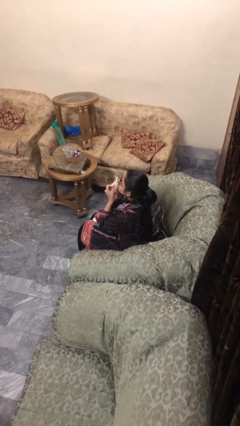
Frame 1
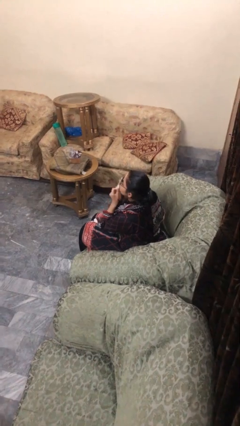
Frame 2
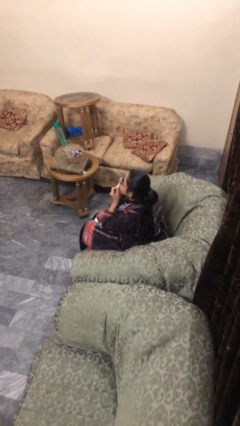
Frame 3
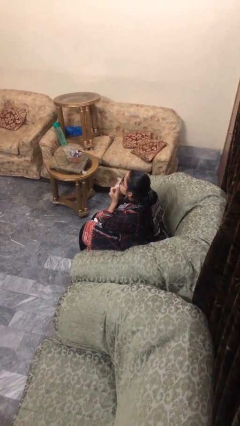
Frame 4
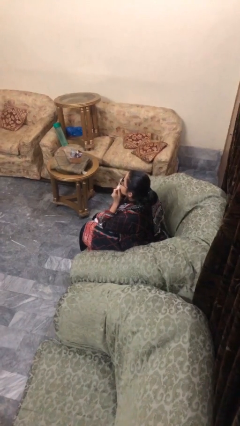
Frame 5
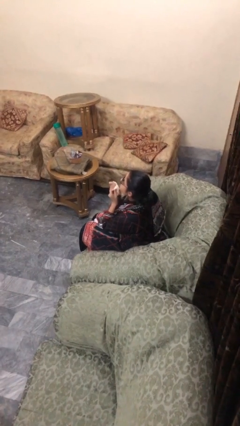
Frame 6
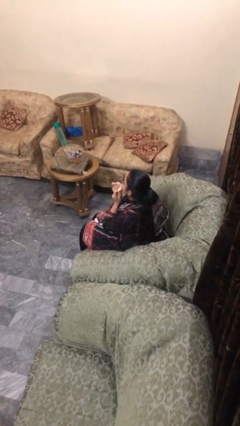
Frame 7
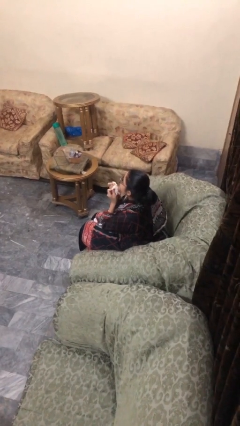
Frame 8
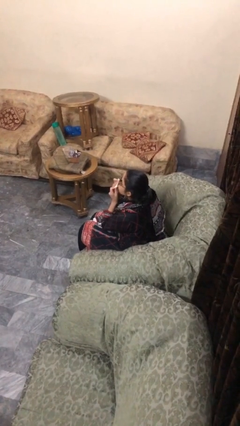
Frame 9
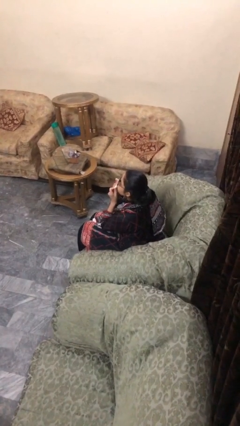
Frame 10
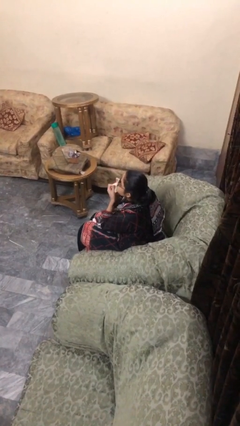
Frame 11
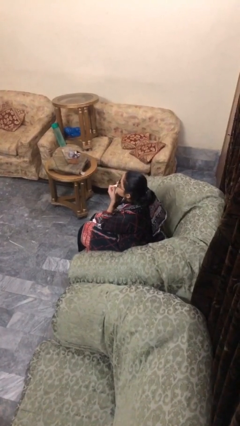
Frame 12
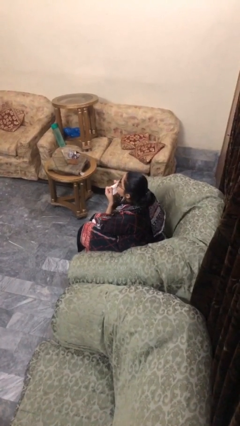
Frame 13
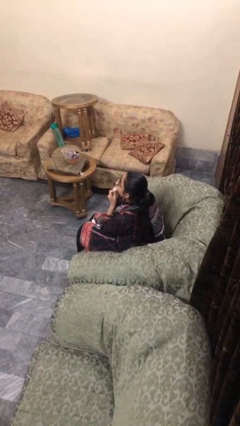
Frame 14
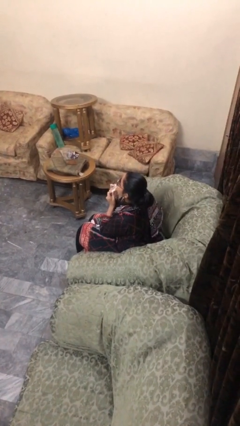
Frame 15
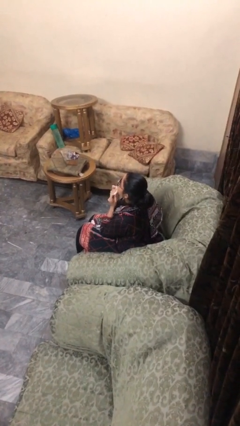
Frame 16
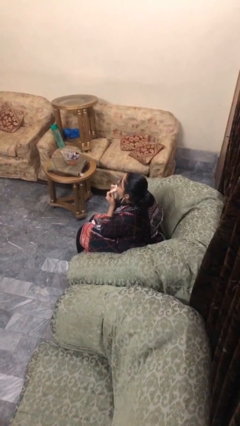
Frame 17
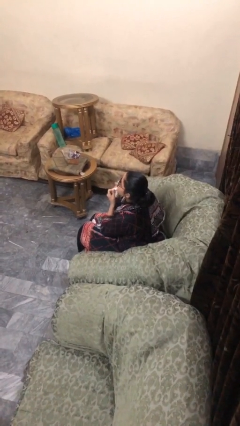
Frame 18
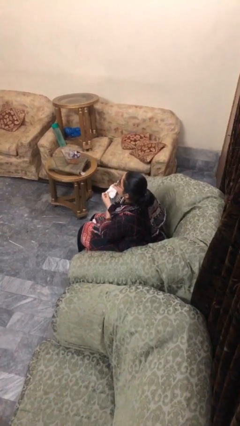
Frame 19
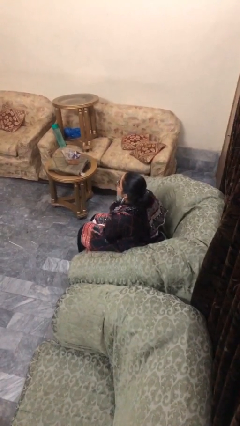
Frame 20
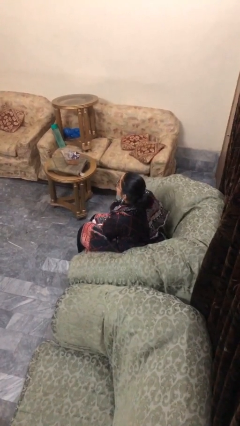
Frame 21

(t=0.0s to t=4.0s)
person wipes mouth with napkin

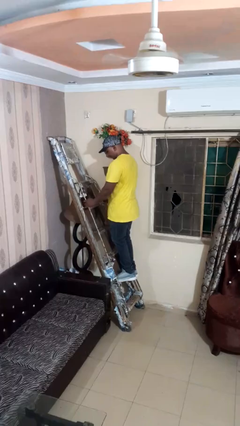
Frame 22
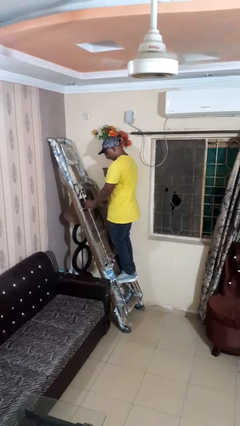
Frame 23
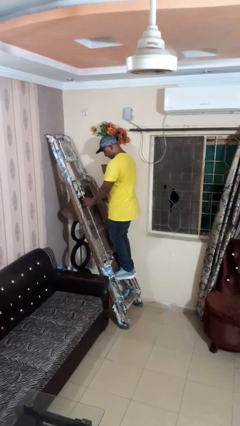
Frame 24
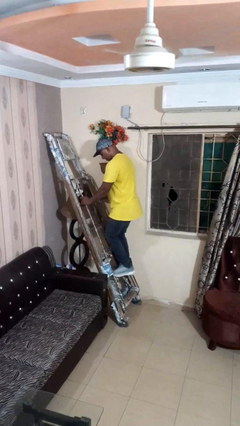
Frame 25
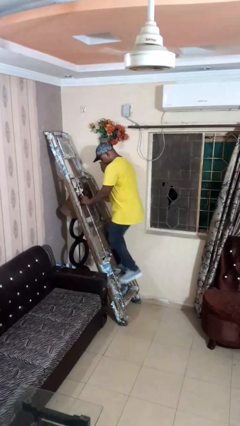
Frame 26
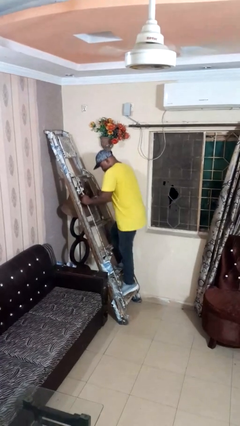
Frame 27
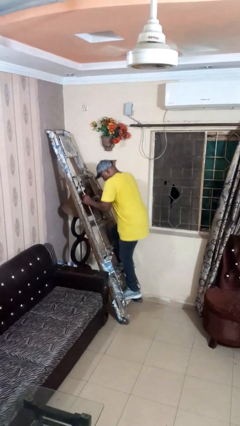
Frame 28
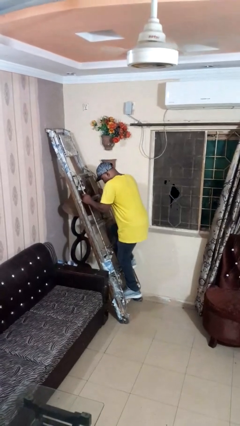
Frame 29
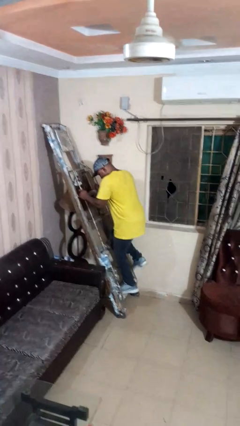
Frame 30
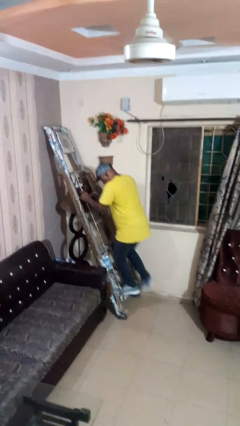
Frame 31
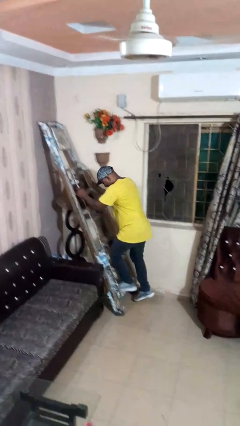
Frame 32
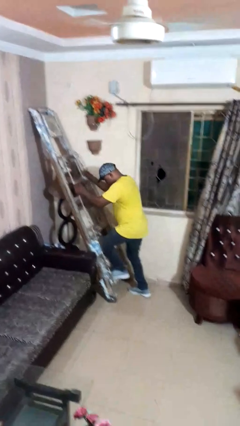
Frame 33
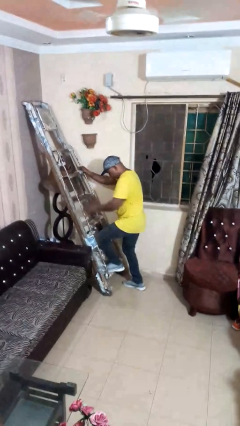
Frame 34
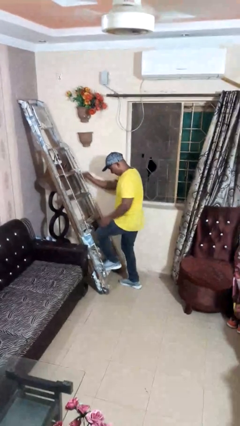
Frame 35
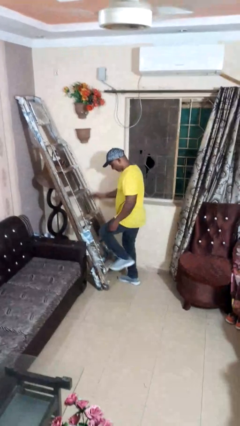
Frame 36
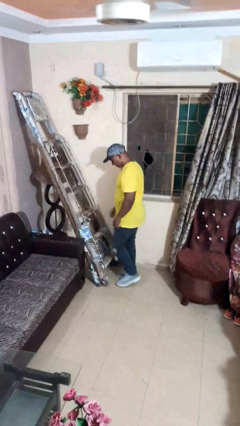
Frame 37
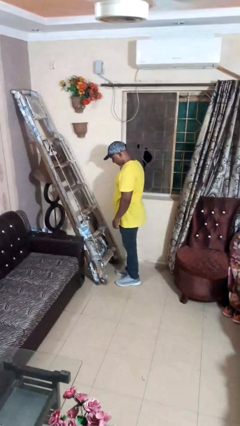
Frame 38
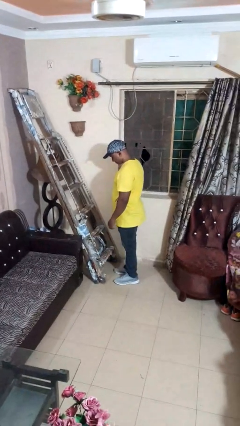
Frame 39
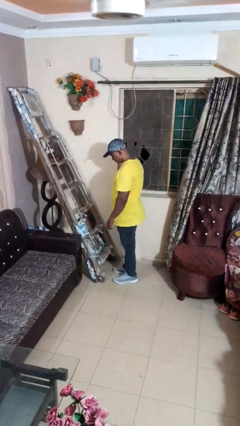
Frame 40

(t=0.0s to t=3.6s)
person climbs down ladder

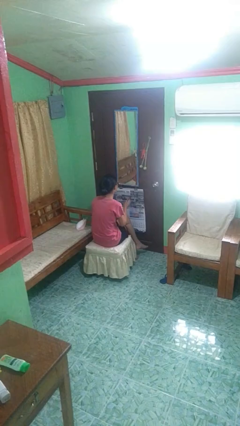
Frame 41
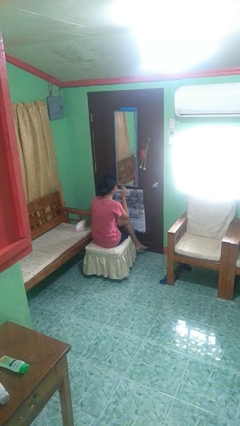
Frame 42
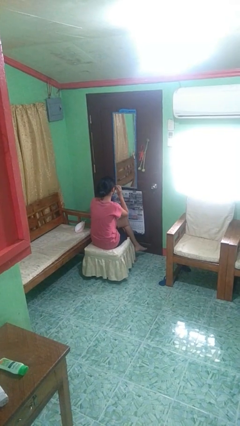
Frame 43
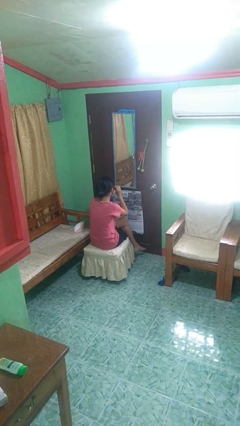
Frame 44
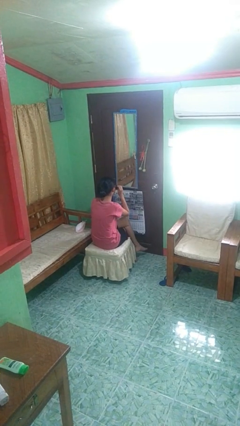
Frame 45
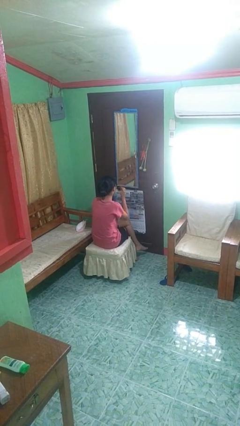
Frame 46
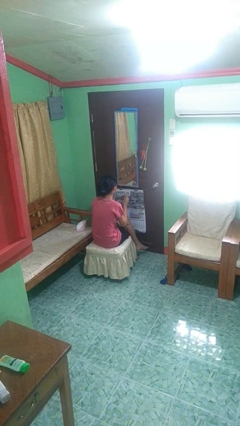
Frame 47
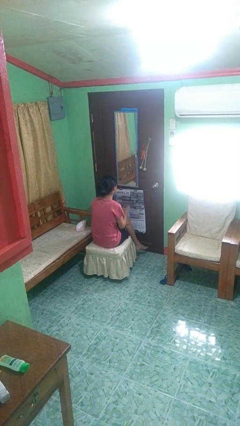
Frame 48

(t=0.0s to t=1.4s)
person takes off sunglasses

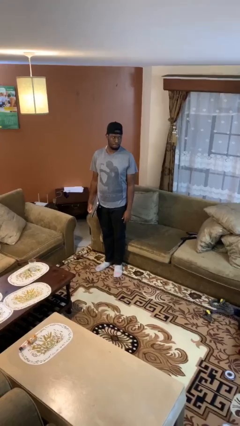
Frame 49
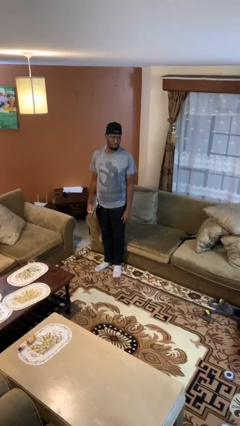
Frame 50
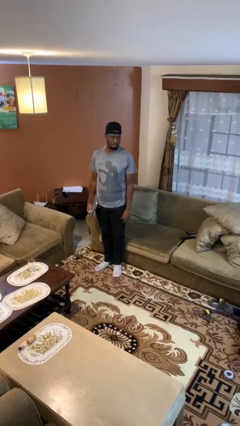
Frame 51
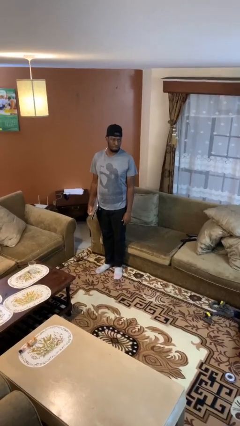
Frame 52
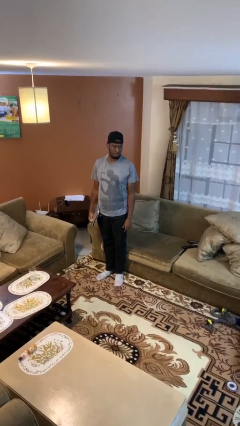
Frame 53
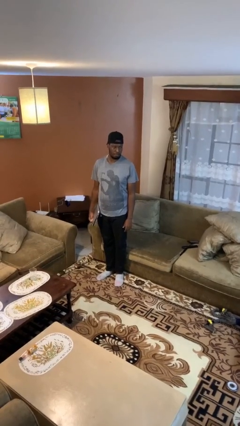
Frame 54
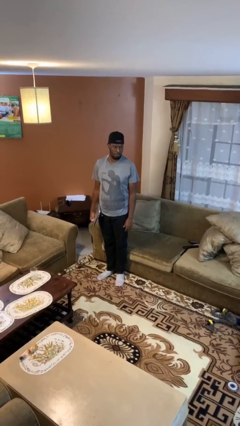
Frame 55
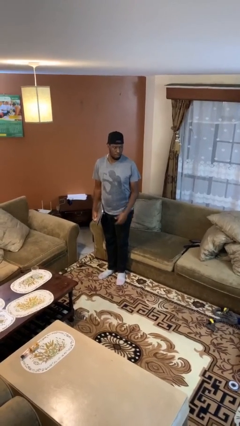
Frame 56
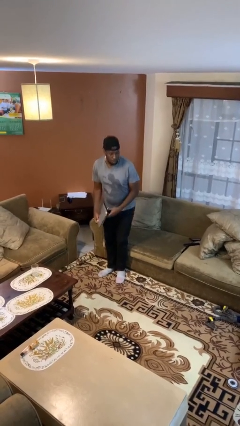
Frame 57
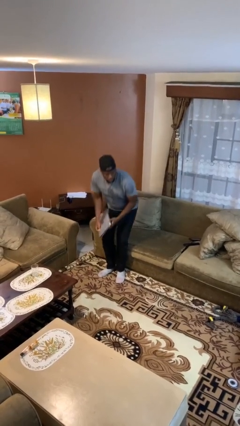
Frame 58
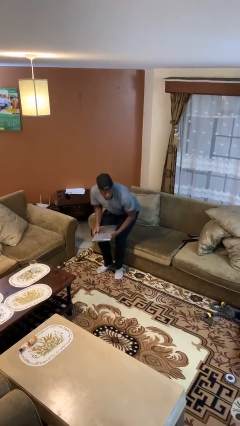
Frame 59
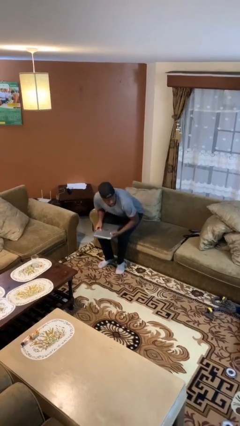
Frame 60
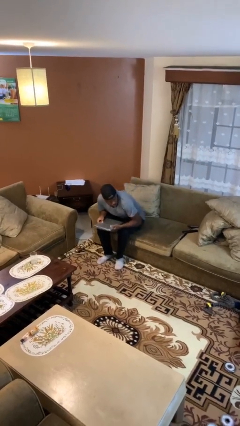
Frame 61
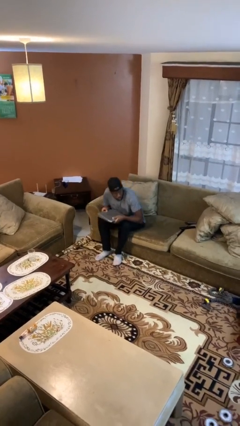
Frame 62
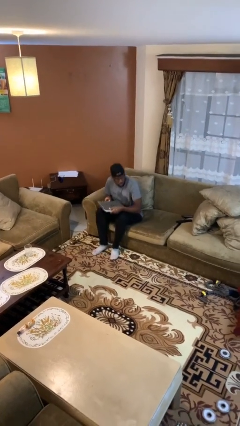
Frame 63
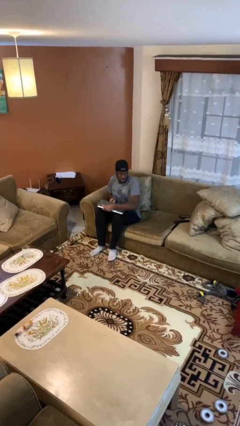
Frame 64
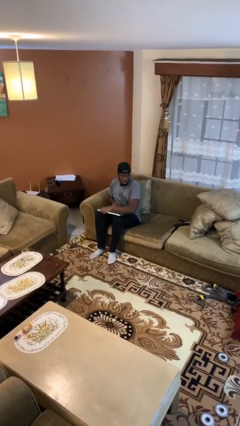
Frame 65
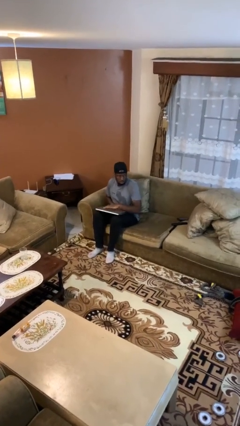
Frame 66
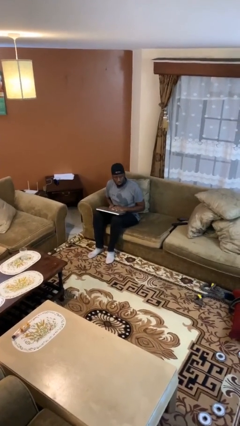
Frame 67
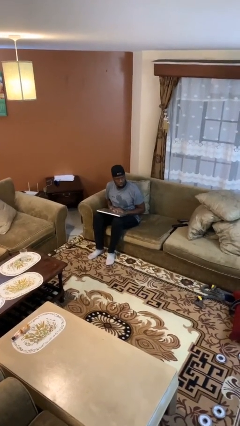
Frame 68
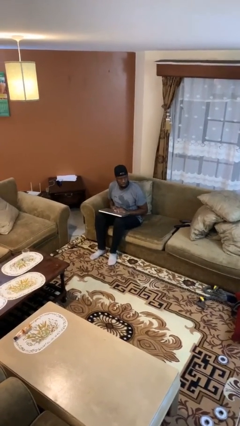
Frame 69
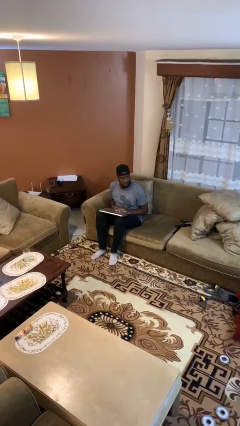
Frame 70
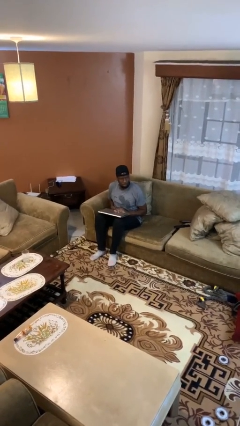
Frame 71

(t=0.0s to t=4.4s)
person sits down

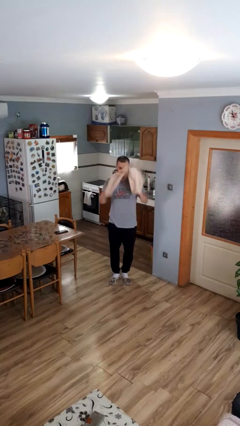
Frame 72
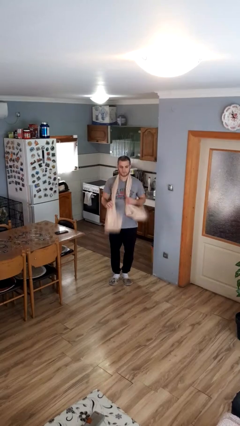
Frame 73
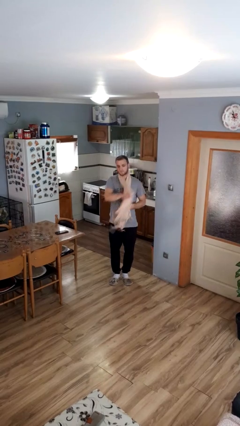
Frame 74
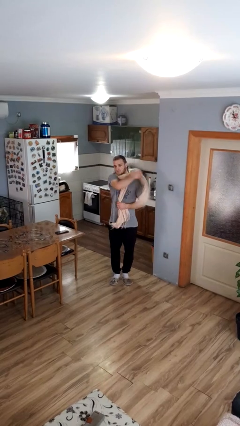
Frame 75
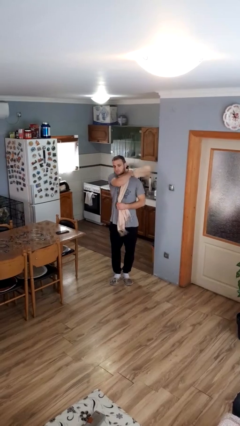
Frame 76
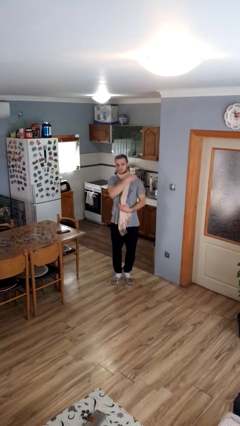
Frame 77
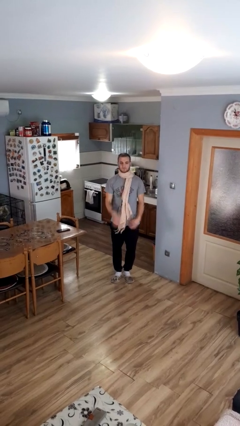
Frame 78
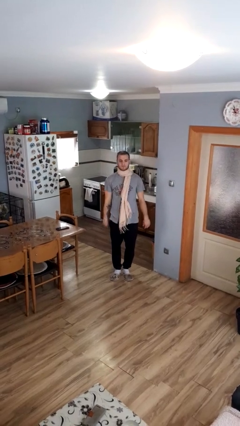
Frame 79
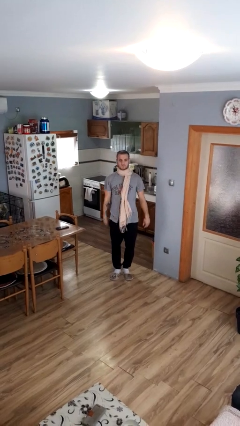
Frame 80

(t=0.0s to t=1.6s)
person puts on scarf

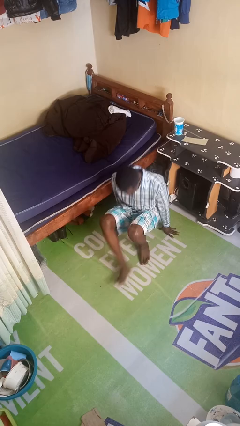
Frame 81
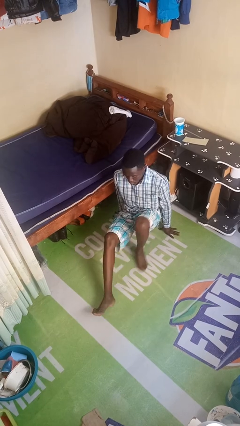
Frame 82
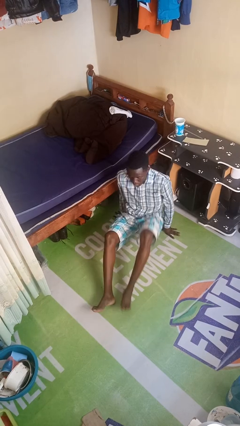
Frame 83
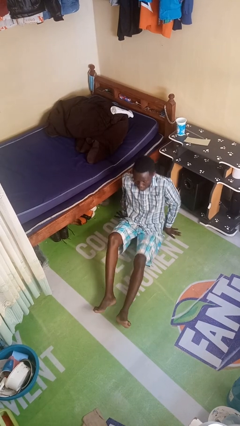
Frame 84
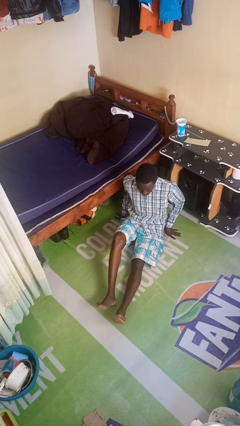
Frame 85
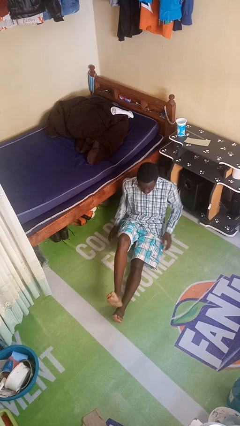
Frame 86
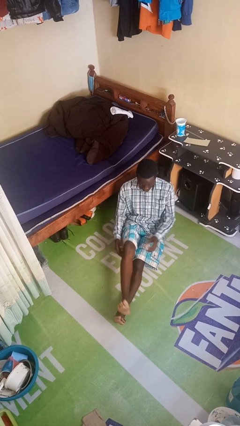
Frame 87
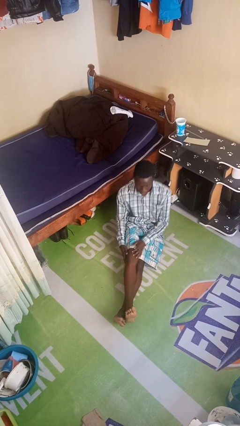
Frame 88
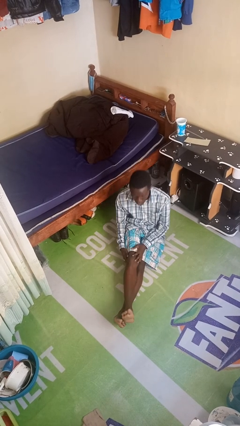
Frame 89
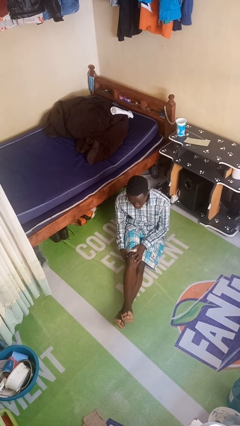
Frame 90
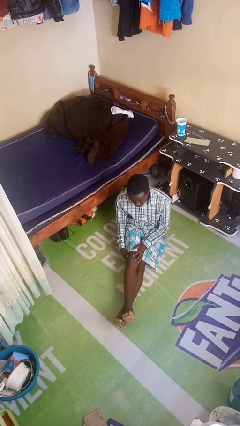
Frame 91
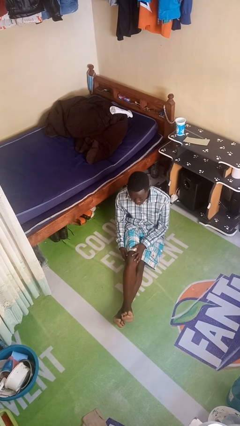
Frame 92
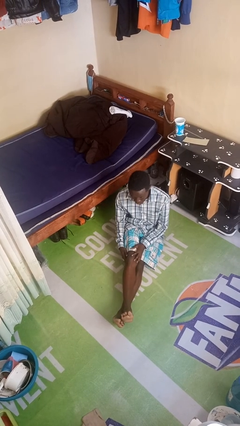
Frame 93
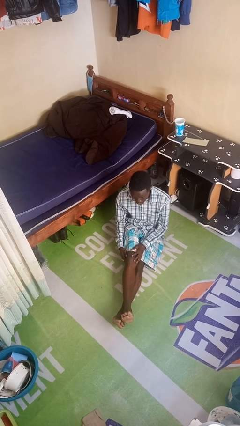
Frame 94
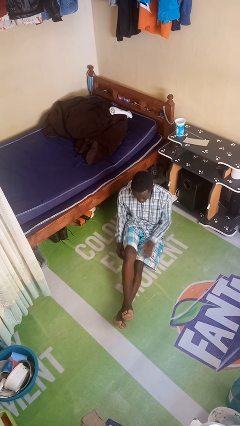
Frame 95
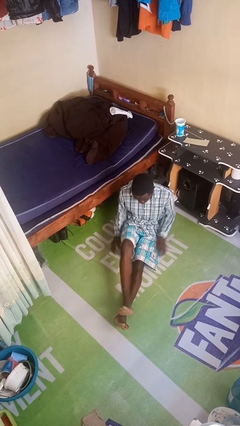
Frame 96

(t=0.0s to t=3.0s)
person sits crisscross
